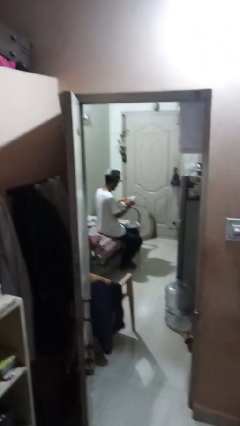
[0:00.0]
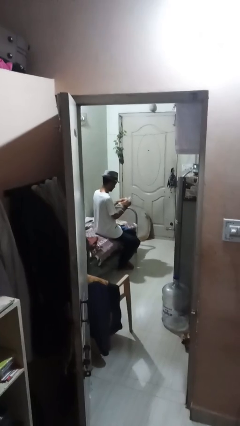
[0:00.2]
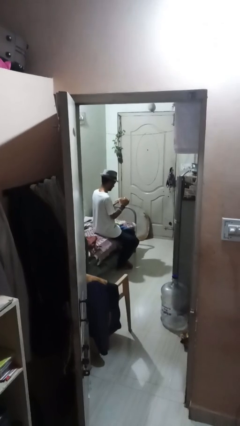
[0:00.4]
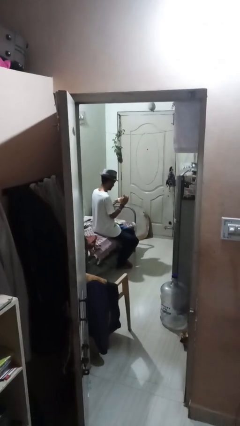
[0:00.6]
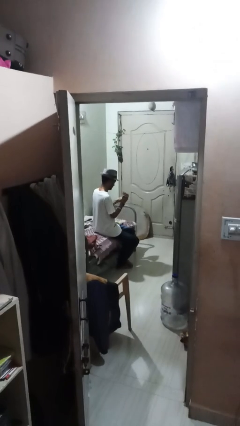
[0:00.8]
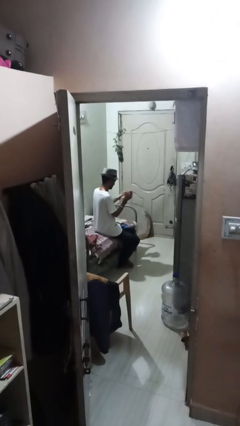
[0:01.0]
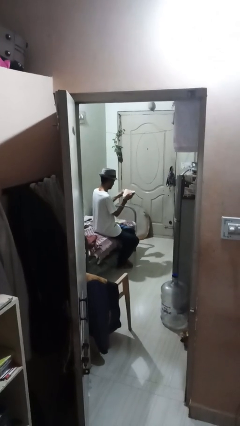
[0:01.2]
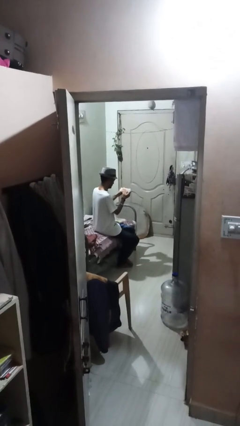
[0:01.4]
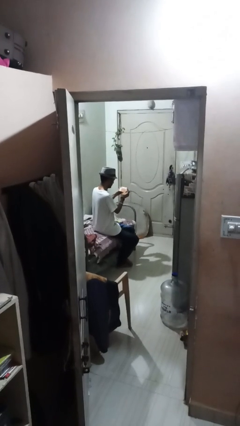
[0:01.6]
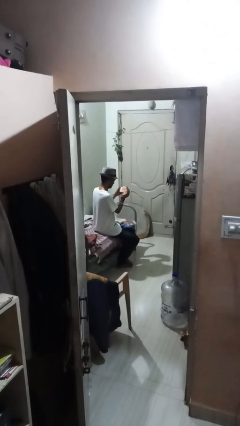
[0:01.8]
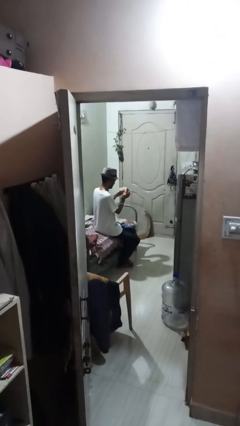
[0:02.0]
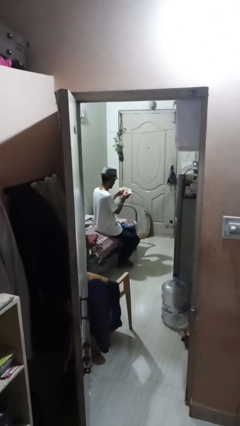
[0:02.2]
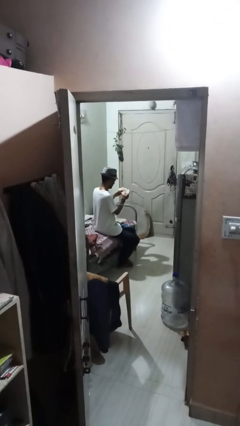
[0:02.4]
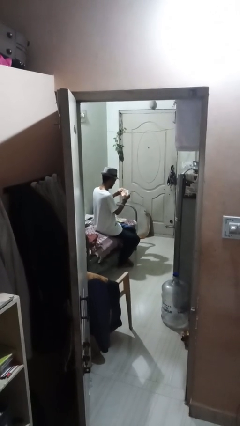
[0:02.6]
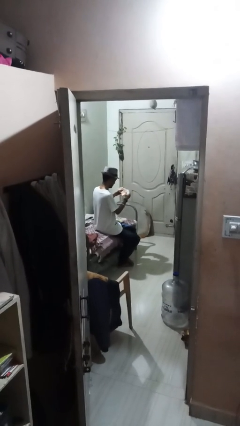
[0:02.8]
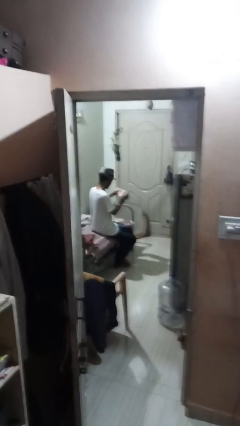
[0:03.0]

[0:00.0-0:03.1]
person tears paper

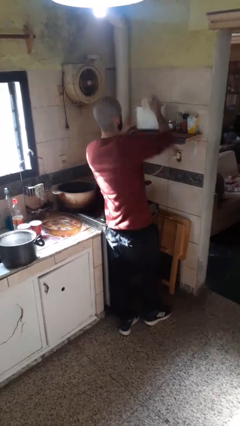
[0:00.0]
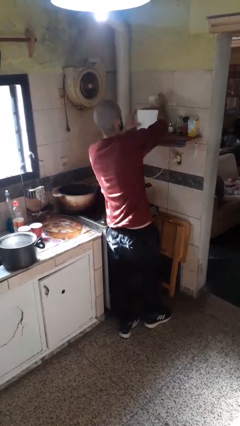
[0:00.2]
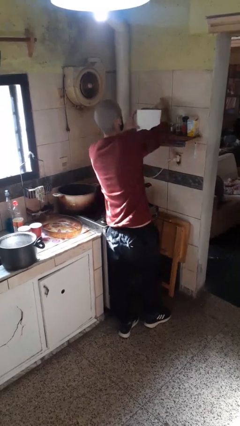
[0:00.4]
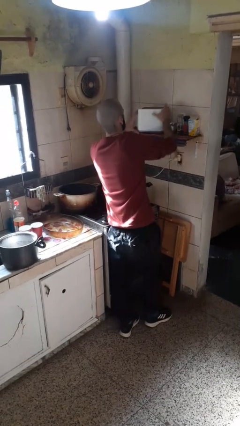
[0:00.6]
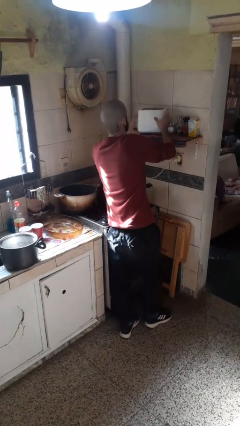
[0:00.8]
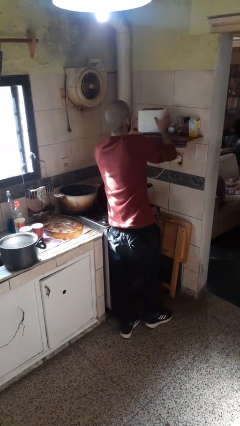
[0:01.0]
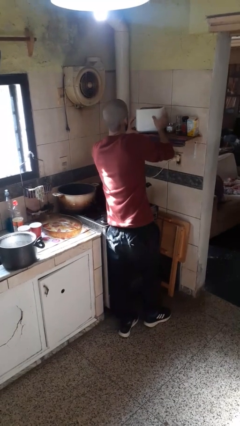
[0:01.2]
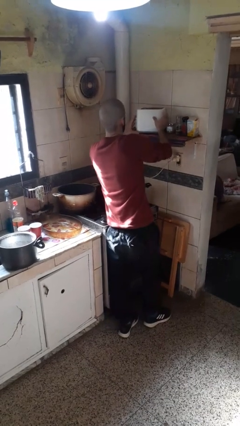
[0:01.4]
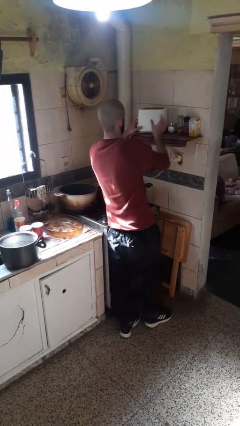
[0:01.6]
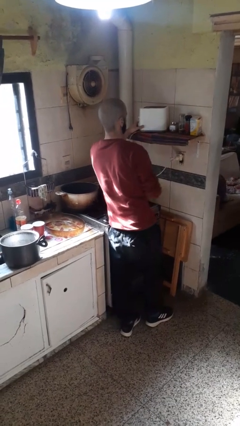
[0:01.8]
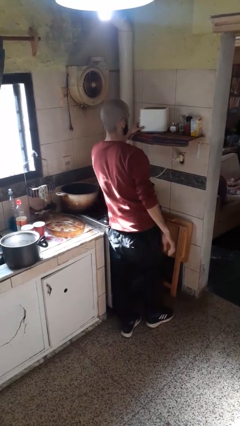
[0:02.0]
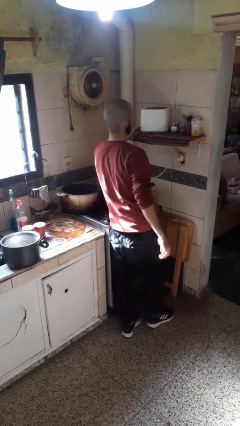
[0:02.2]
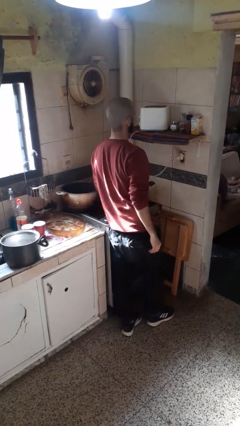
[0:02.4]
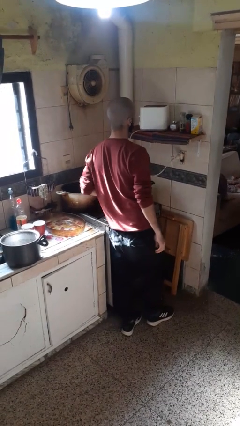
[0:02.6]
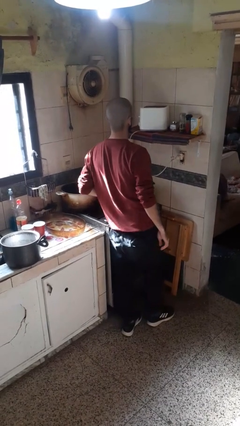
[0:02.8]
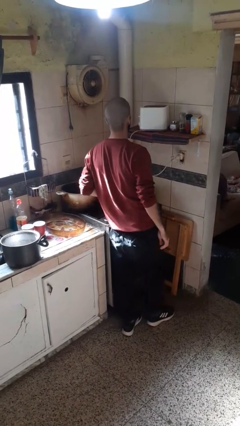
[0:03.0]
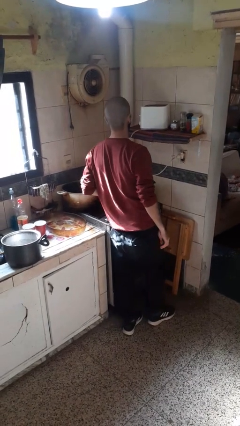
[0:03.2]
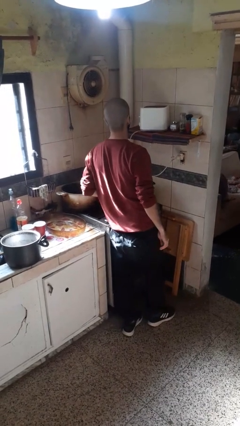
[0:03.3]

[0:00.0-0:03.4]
person puts object into toaster

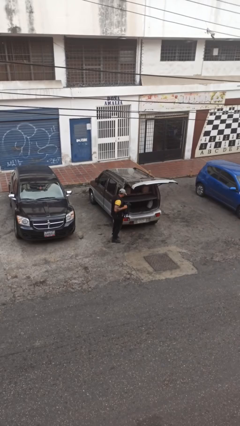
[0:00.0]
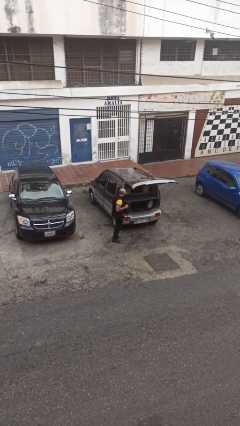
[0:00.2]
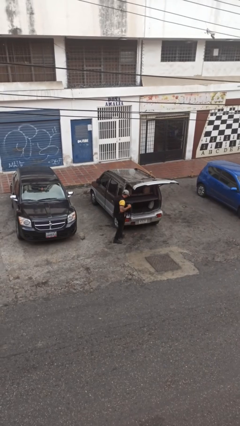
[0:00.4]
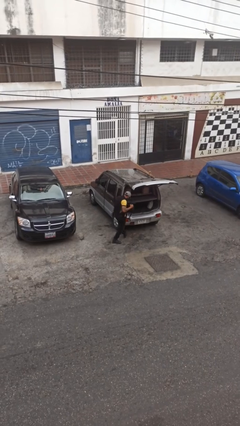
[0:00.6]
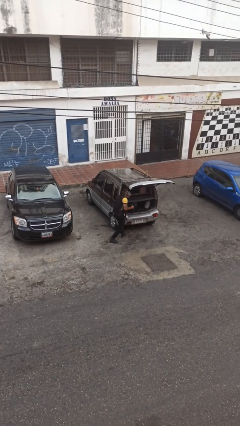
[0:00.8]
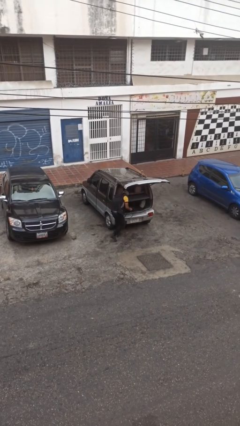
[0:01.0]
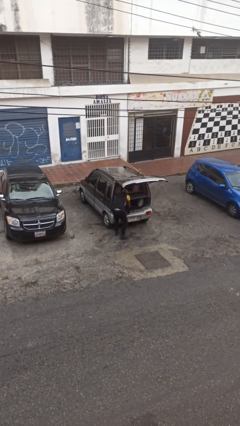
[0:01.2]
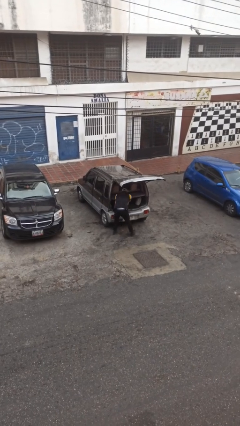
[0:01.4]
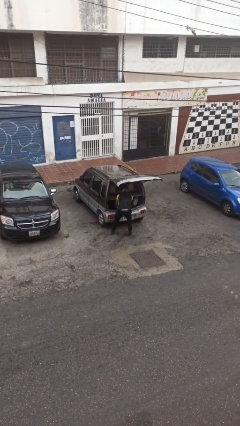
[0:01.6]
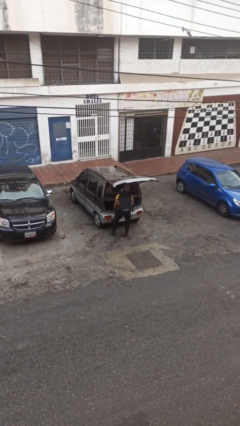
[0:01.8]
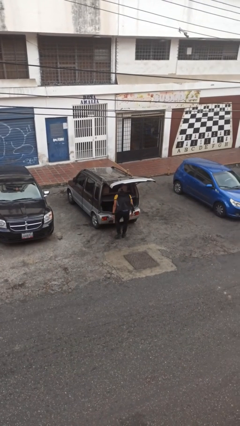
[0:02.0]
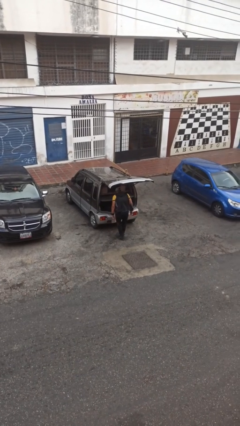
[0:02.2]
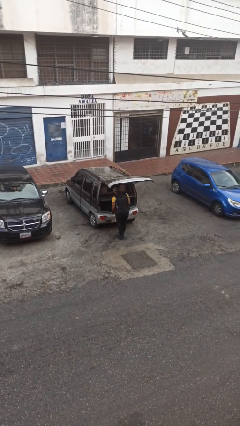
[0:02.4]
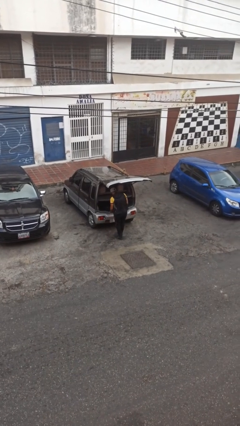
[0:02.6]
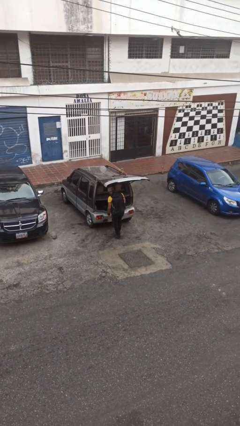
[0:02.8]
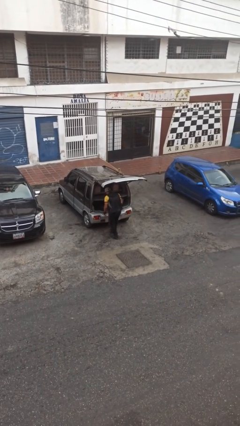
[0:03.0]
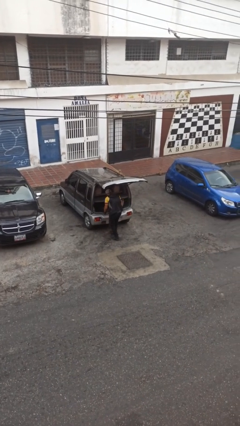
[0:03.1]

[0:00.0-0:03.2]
person loads car

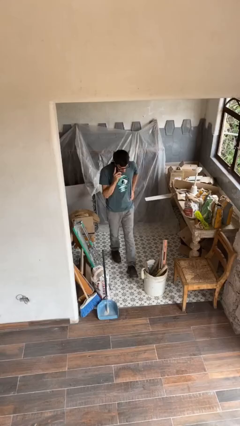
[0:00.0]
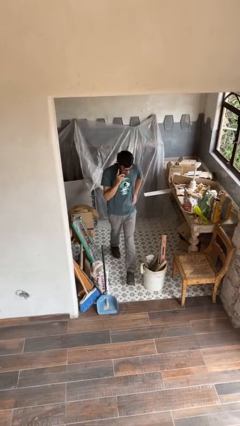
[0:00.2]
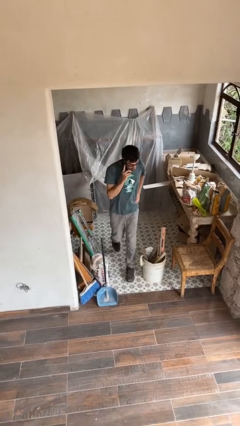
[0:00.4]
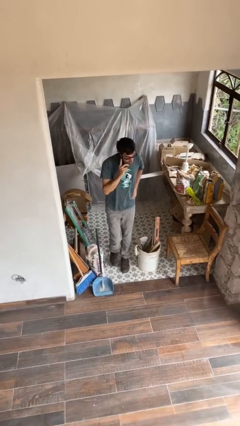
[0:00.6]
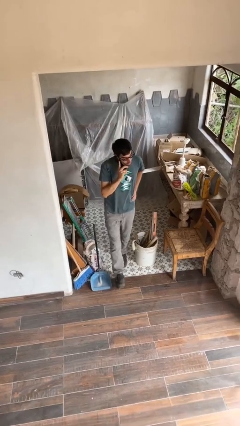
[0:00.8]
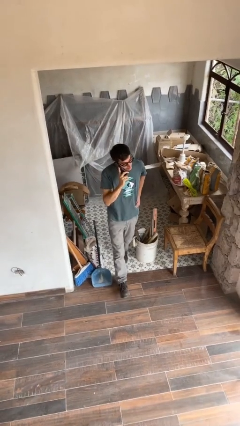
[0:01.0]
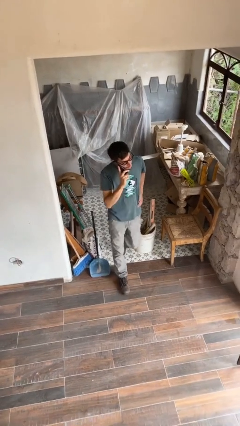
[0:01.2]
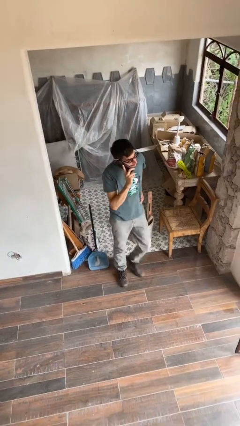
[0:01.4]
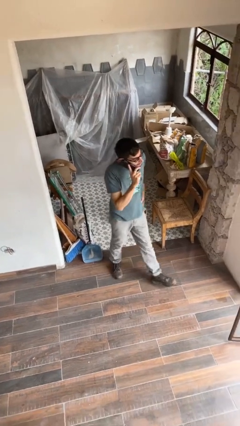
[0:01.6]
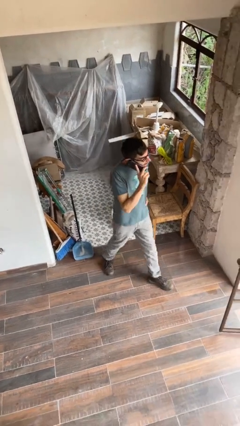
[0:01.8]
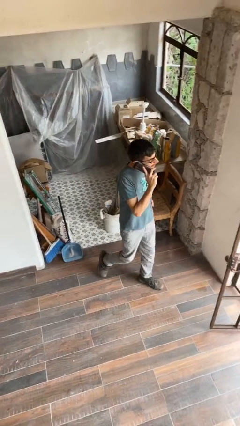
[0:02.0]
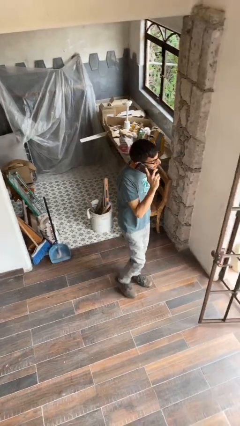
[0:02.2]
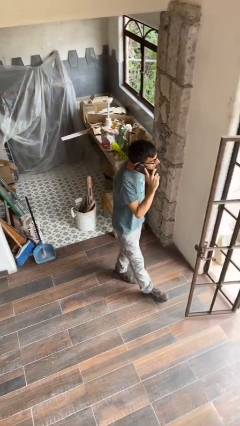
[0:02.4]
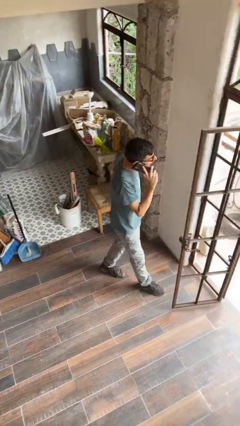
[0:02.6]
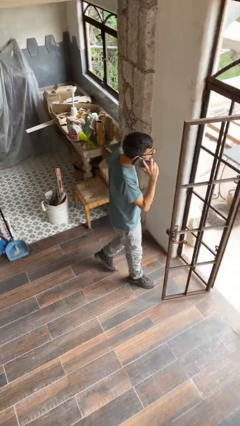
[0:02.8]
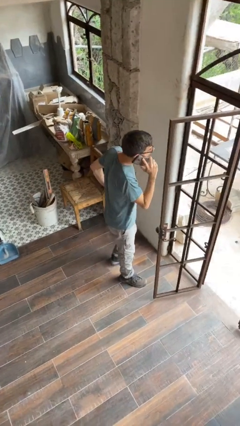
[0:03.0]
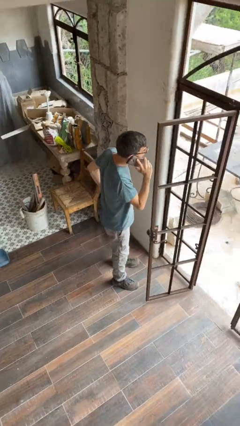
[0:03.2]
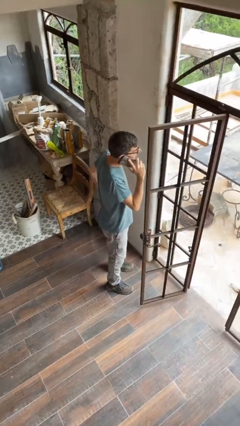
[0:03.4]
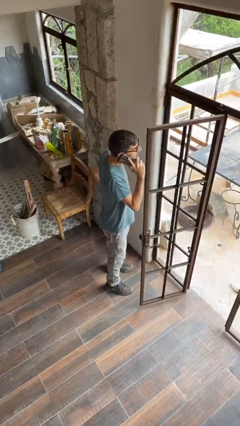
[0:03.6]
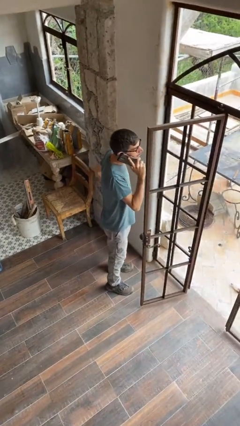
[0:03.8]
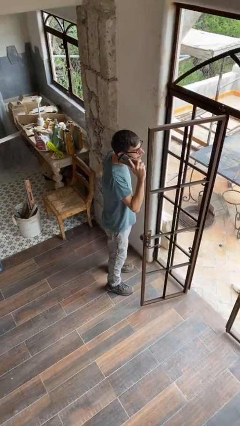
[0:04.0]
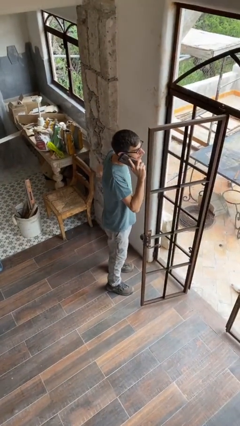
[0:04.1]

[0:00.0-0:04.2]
person enters scene through structure

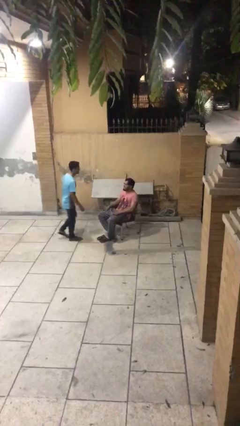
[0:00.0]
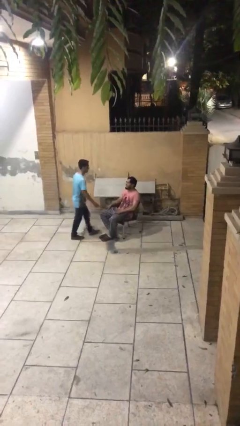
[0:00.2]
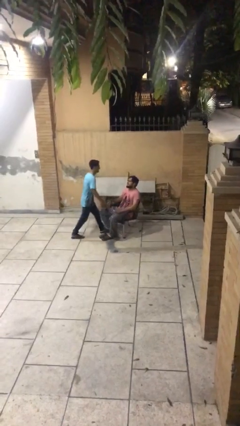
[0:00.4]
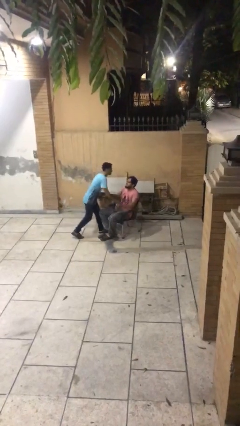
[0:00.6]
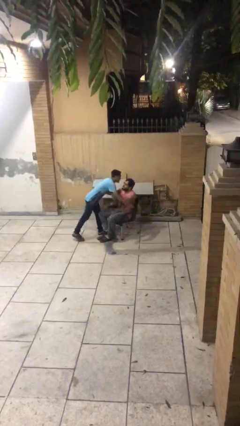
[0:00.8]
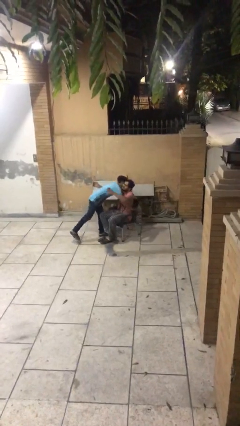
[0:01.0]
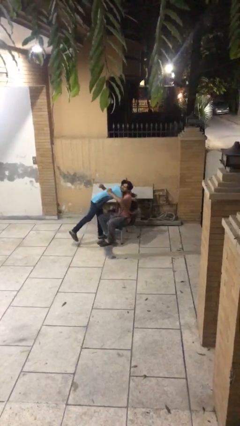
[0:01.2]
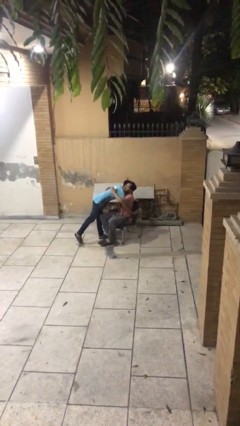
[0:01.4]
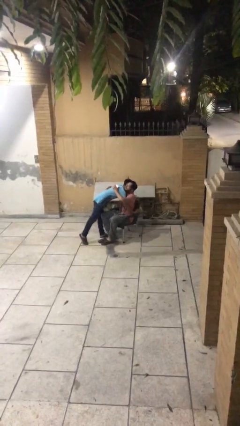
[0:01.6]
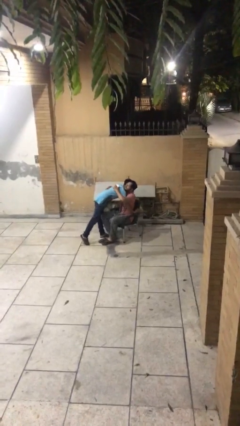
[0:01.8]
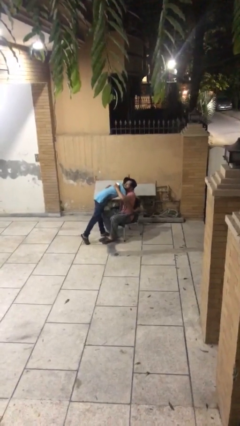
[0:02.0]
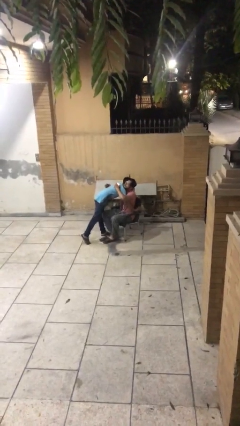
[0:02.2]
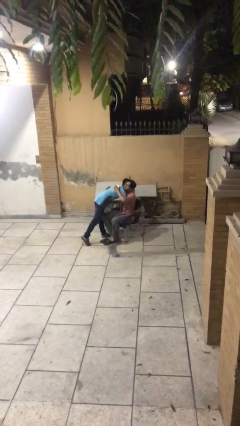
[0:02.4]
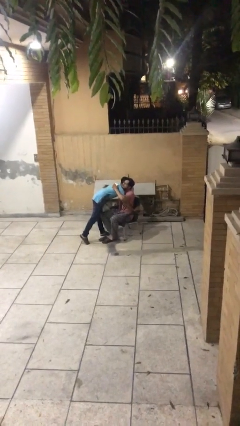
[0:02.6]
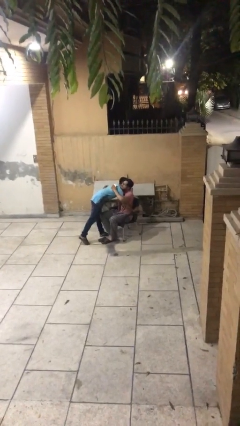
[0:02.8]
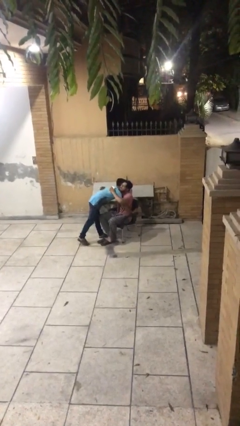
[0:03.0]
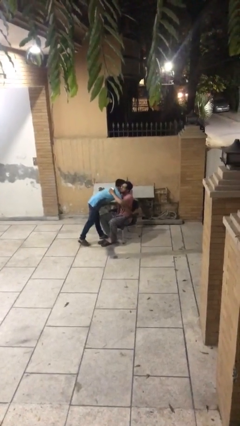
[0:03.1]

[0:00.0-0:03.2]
person embraces person

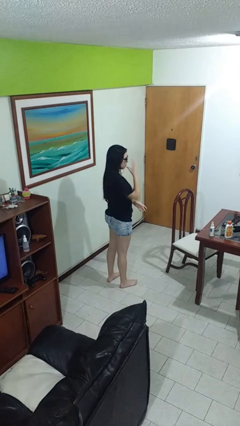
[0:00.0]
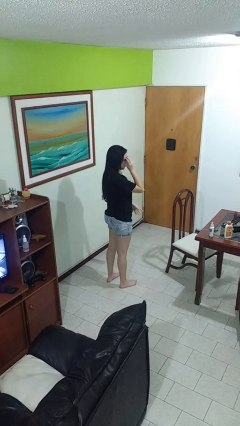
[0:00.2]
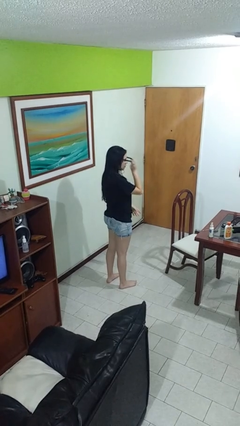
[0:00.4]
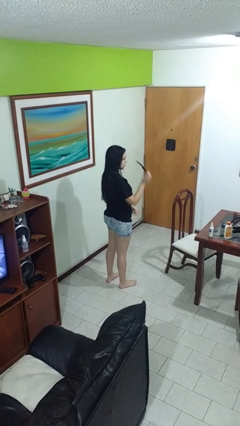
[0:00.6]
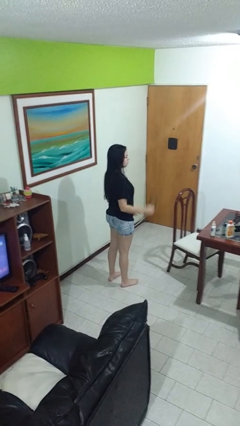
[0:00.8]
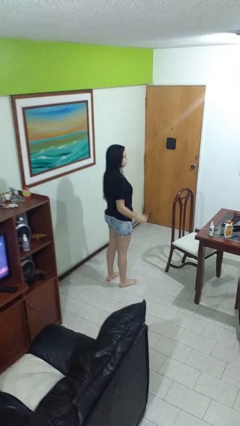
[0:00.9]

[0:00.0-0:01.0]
person takes off sunglasses
